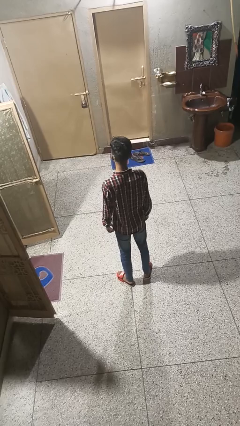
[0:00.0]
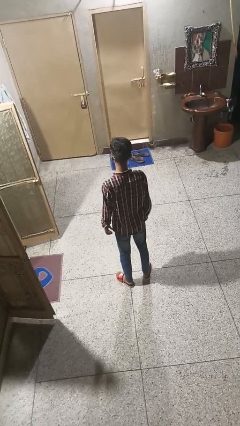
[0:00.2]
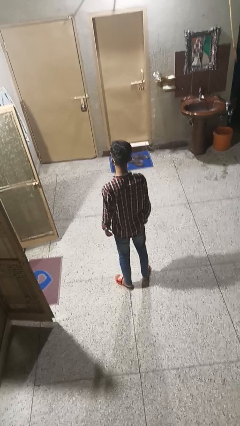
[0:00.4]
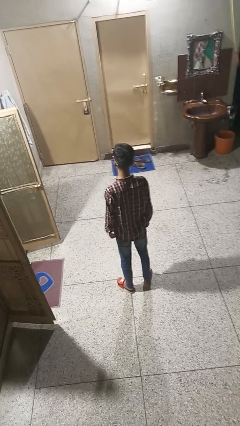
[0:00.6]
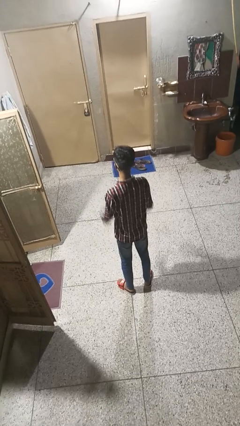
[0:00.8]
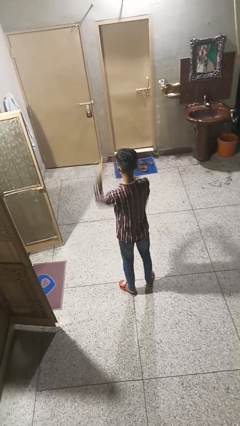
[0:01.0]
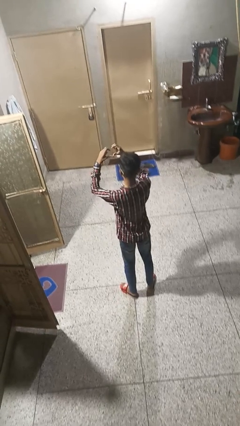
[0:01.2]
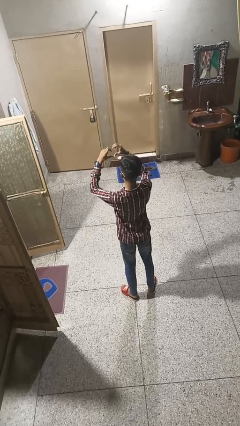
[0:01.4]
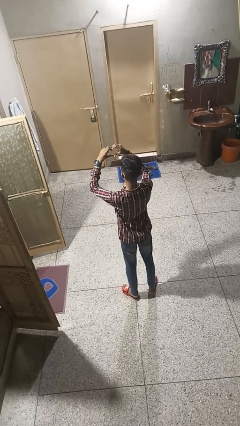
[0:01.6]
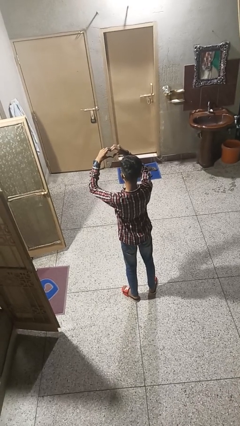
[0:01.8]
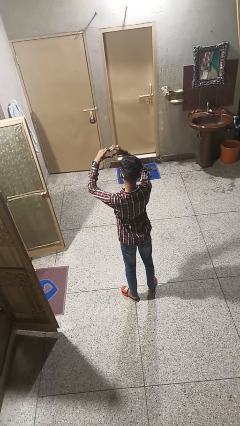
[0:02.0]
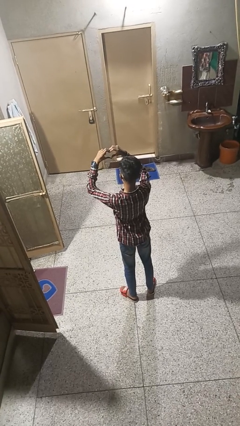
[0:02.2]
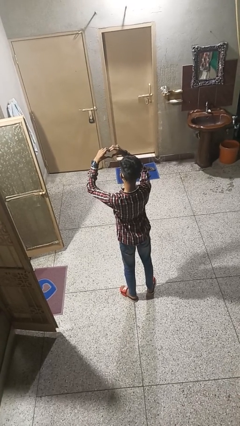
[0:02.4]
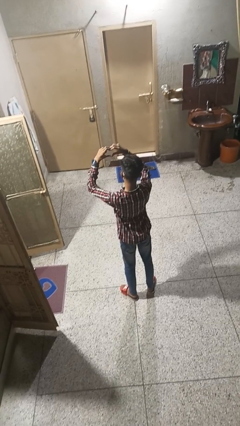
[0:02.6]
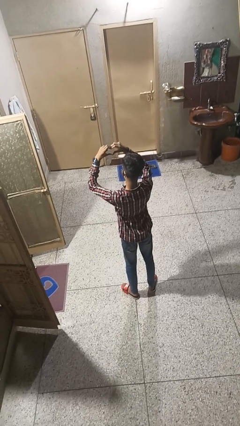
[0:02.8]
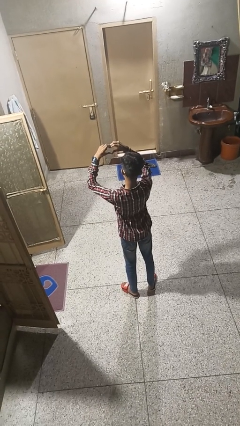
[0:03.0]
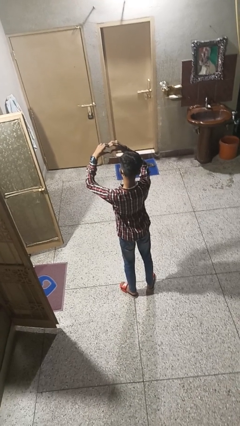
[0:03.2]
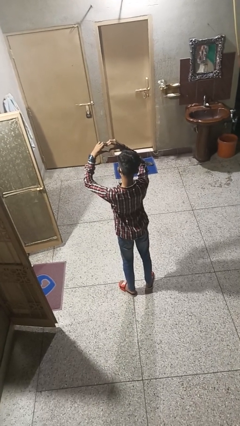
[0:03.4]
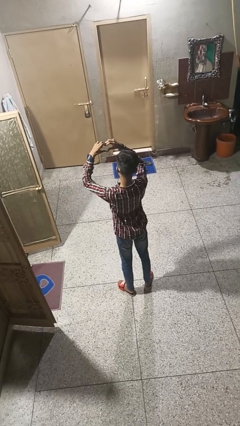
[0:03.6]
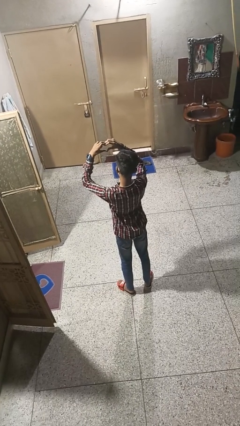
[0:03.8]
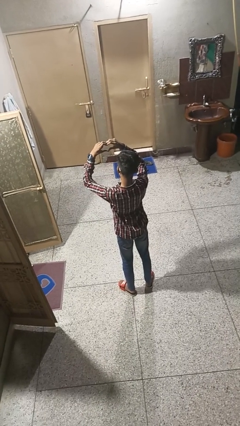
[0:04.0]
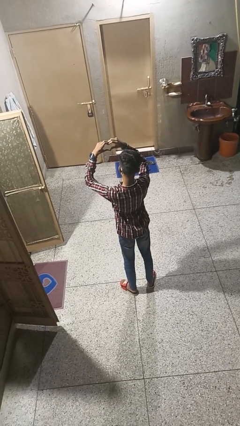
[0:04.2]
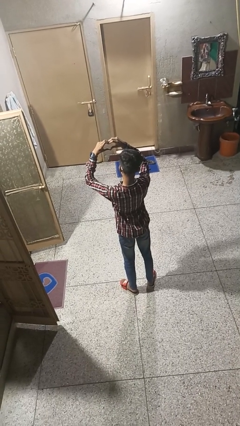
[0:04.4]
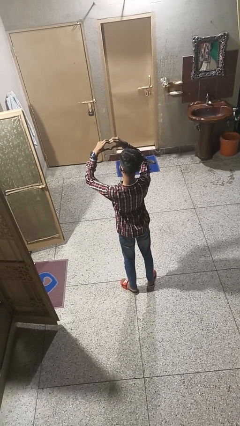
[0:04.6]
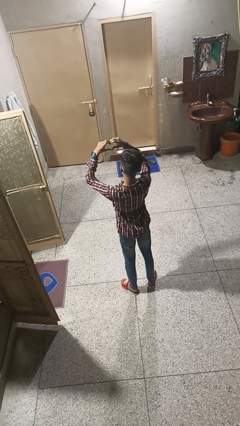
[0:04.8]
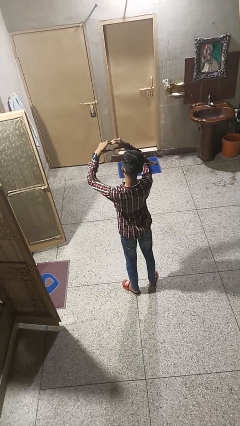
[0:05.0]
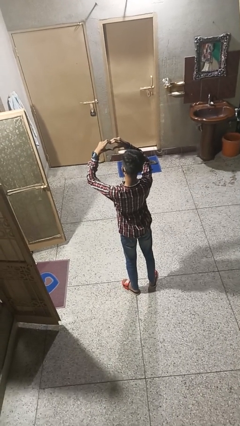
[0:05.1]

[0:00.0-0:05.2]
person gestures heart

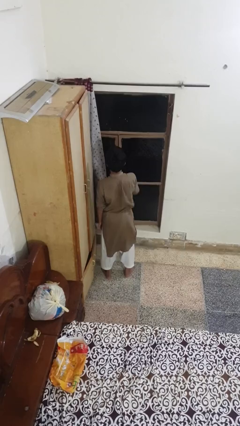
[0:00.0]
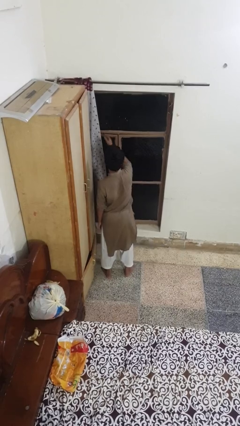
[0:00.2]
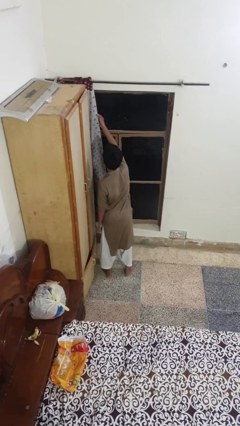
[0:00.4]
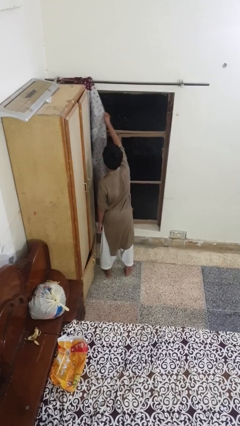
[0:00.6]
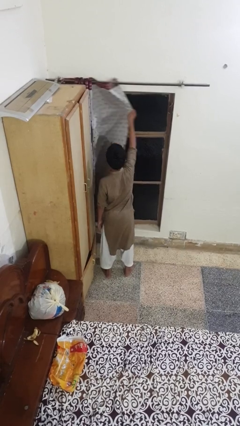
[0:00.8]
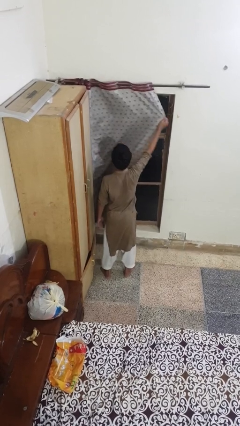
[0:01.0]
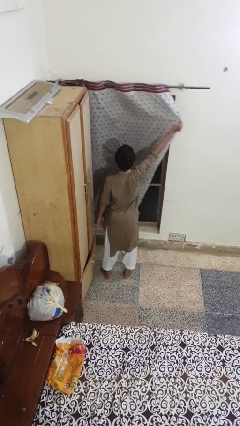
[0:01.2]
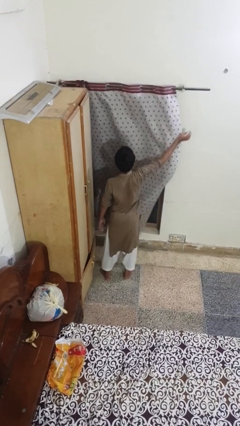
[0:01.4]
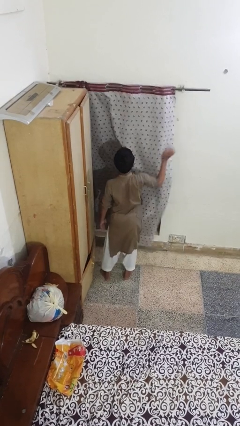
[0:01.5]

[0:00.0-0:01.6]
person closes curtains

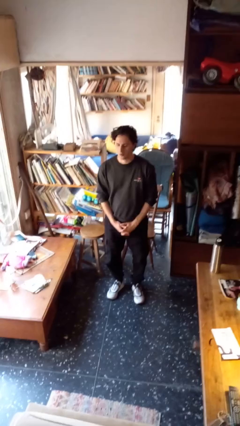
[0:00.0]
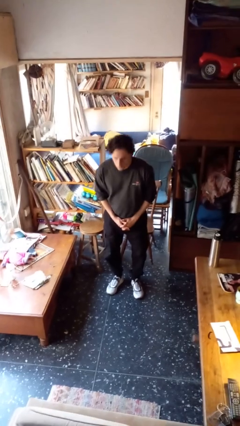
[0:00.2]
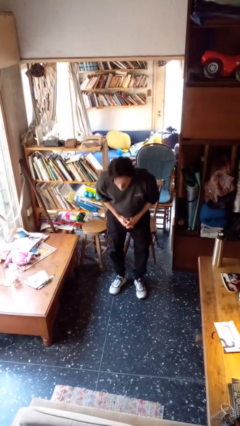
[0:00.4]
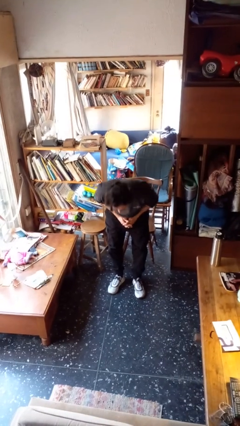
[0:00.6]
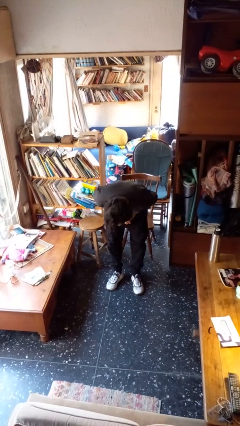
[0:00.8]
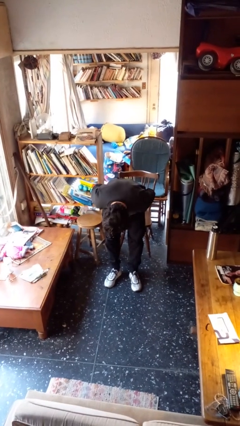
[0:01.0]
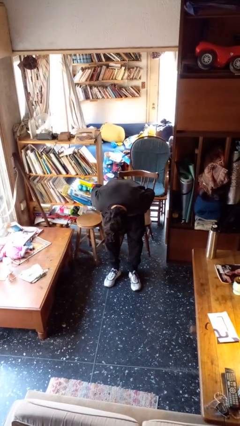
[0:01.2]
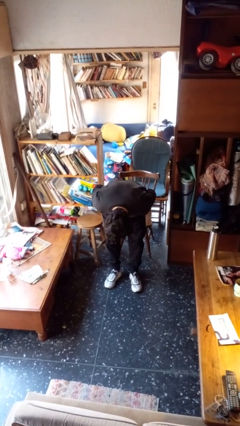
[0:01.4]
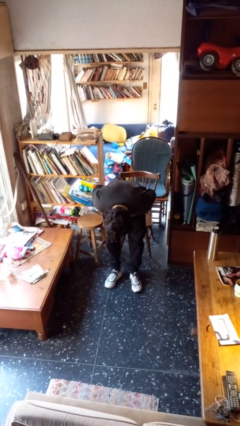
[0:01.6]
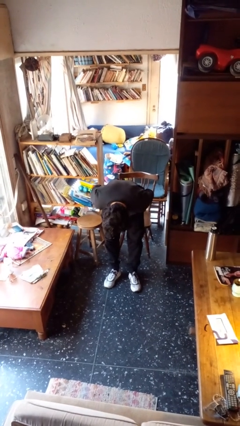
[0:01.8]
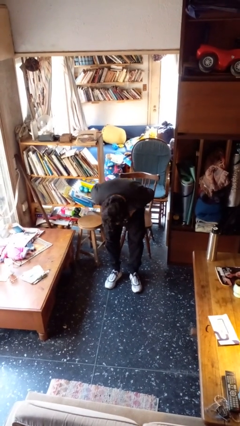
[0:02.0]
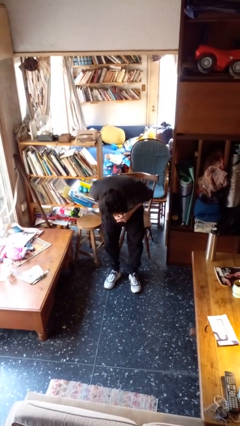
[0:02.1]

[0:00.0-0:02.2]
person bows

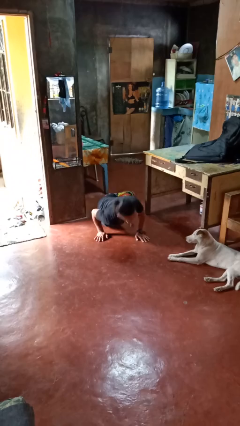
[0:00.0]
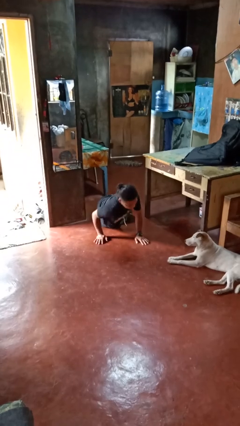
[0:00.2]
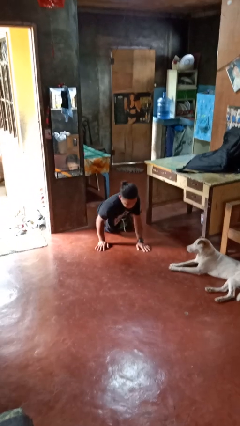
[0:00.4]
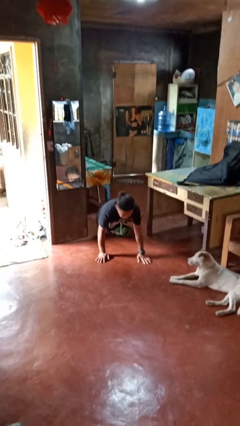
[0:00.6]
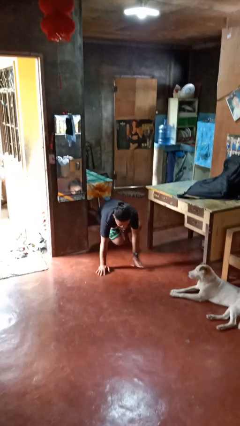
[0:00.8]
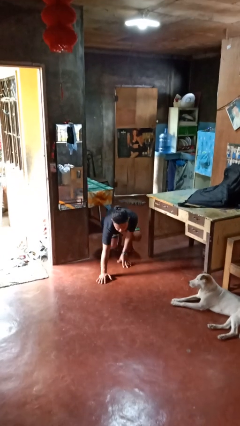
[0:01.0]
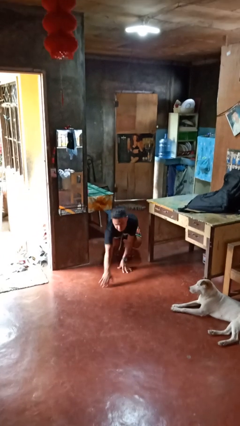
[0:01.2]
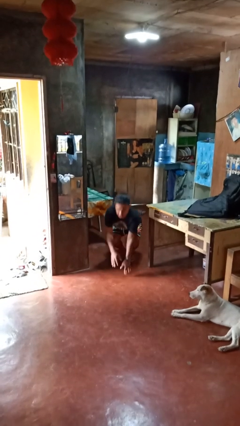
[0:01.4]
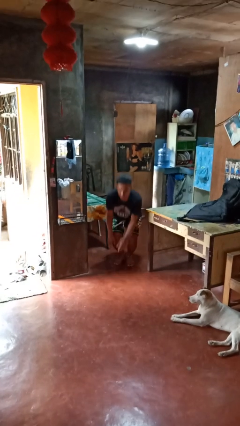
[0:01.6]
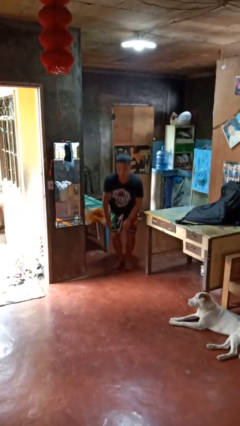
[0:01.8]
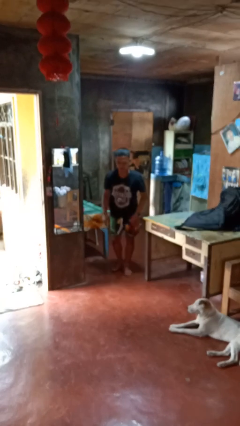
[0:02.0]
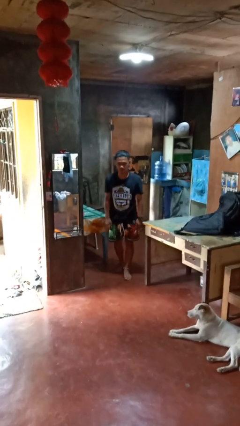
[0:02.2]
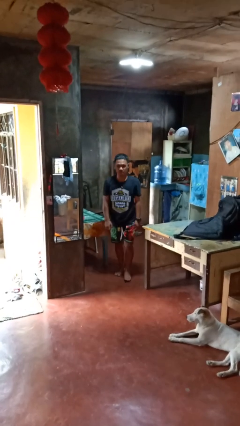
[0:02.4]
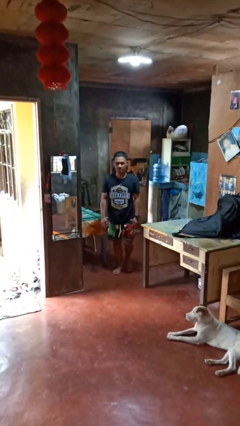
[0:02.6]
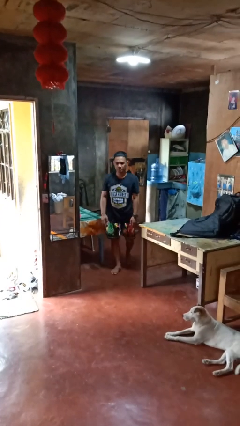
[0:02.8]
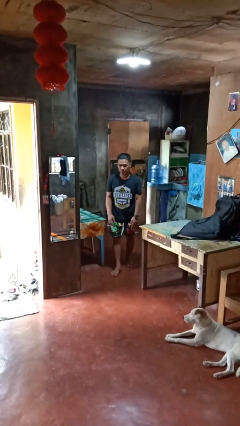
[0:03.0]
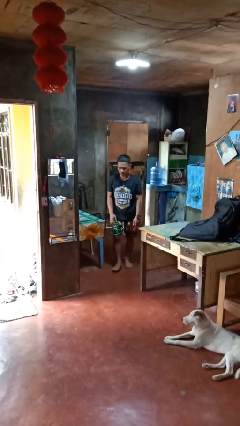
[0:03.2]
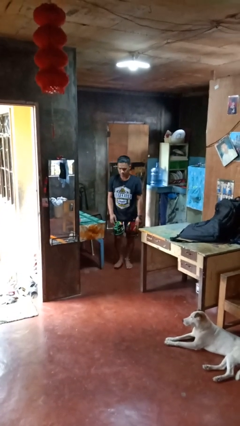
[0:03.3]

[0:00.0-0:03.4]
person stands up from floor

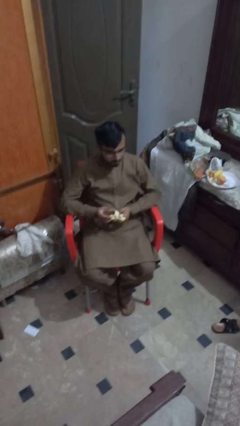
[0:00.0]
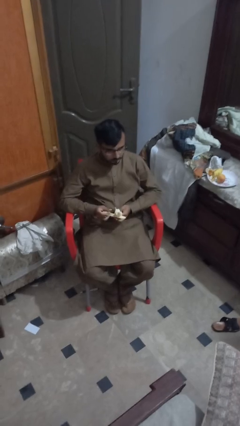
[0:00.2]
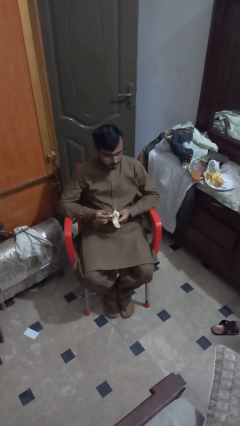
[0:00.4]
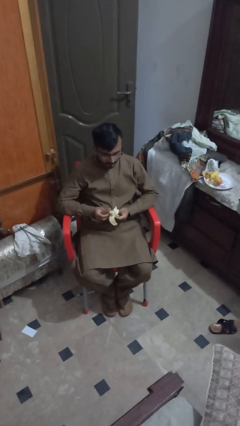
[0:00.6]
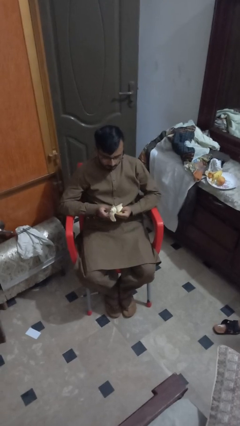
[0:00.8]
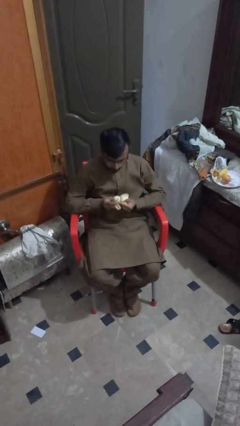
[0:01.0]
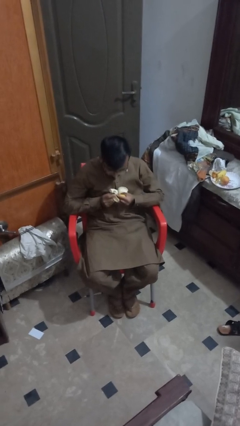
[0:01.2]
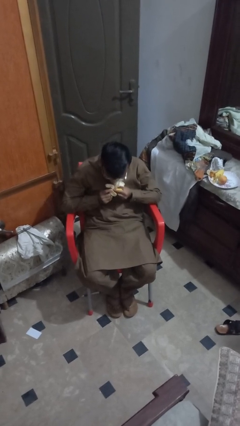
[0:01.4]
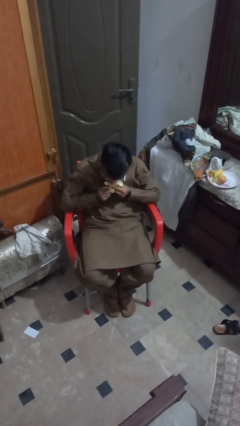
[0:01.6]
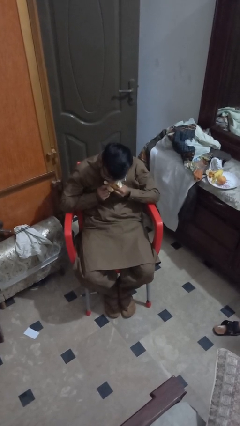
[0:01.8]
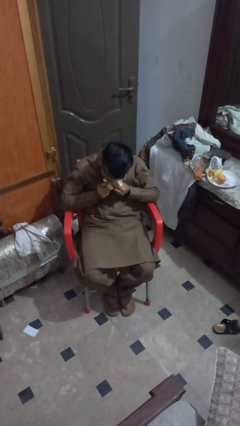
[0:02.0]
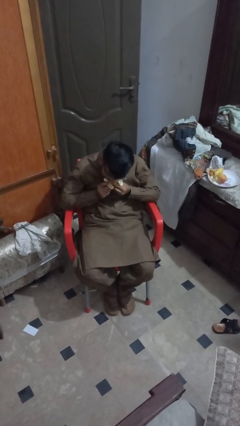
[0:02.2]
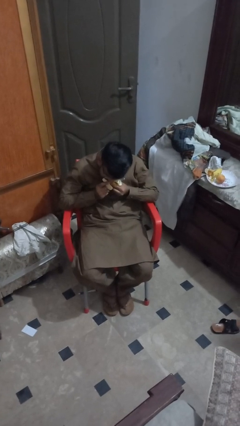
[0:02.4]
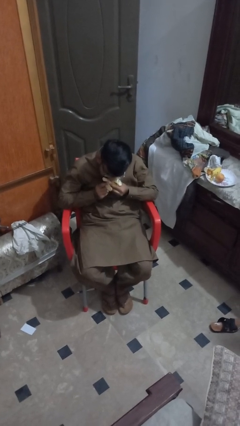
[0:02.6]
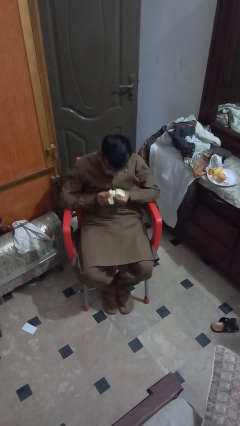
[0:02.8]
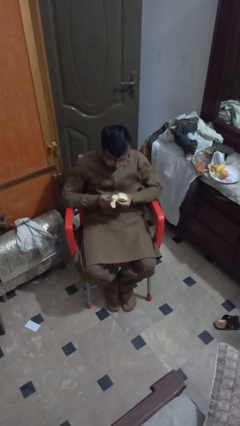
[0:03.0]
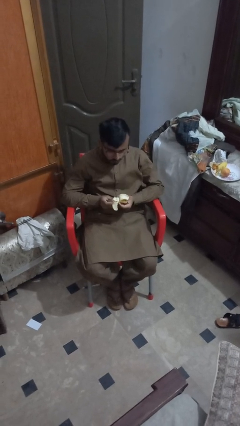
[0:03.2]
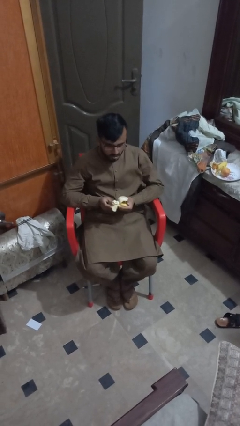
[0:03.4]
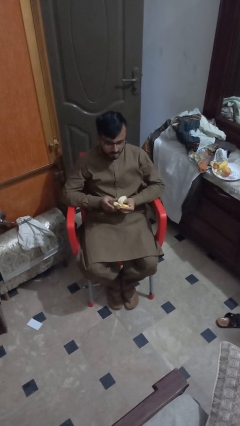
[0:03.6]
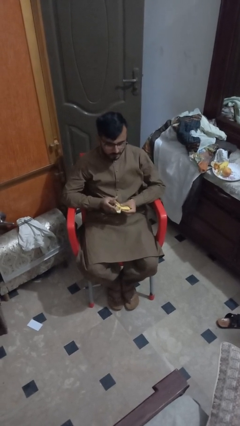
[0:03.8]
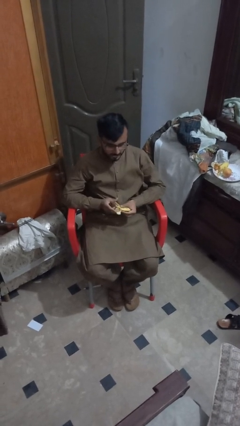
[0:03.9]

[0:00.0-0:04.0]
person eats banana

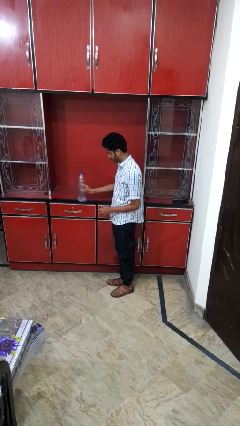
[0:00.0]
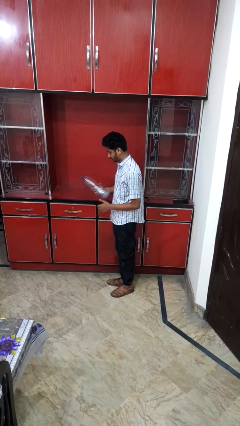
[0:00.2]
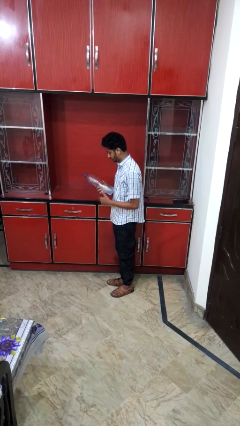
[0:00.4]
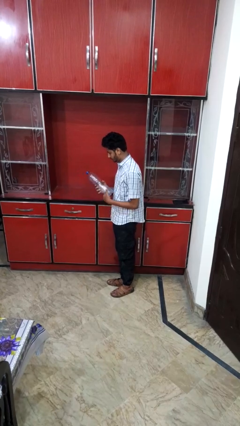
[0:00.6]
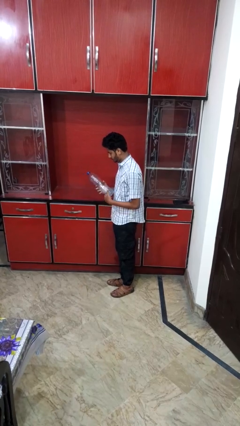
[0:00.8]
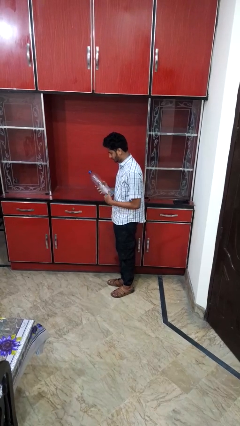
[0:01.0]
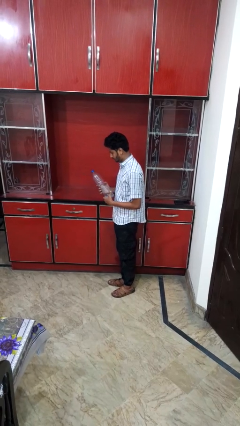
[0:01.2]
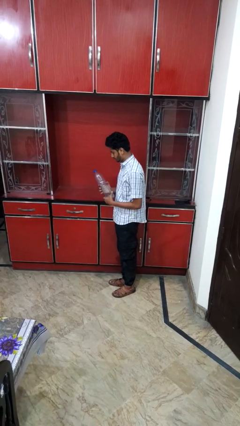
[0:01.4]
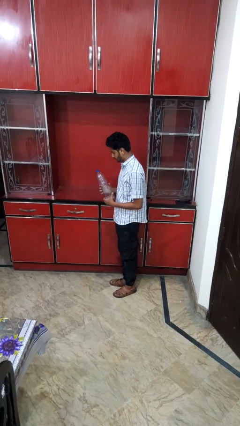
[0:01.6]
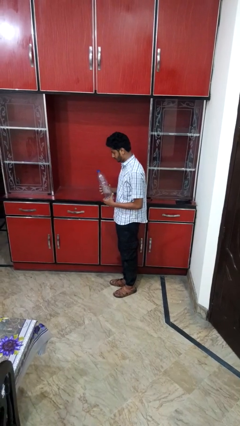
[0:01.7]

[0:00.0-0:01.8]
person picks up object from countertop
